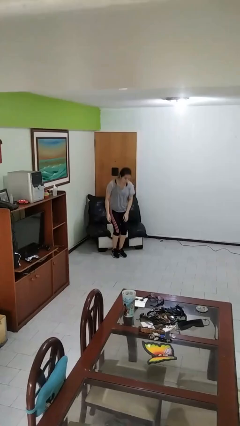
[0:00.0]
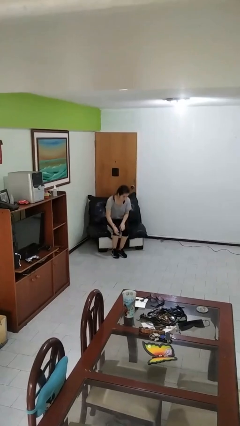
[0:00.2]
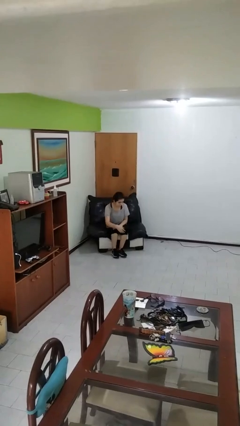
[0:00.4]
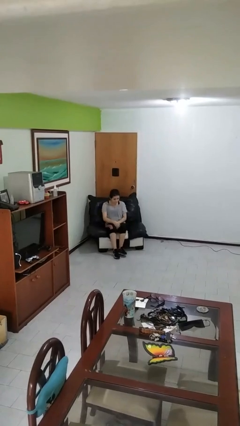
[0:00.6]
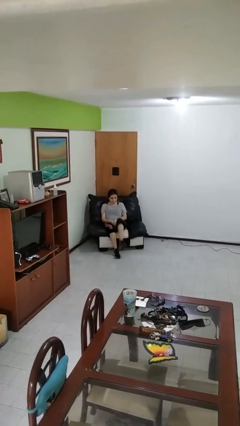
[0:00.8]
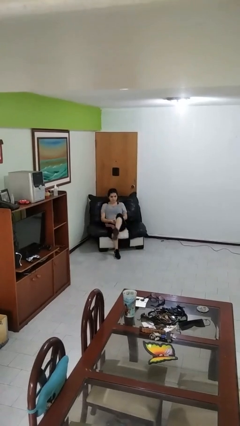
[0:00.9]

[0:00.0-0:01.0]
person lies down on couch

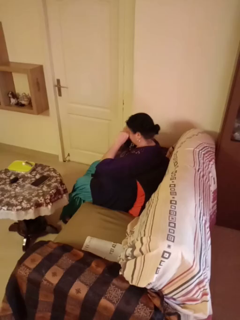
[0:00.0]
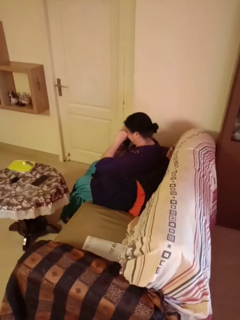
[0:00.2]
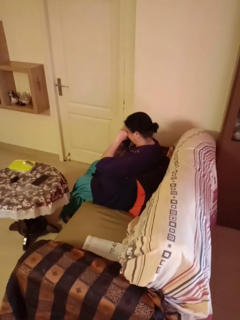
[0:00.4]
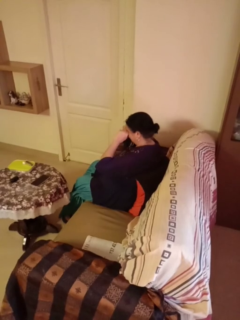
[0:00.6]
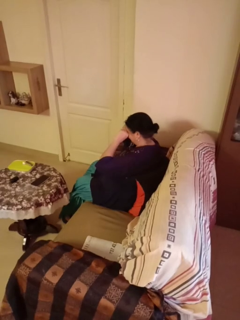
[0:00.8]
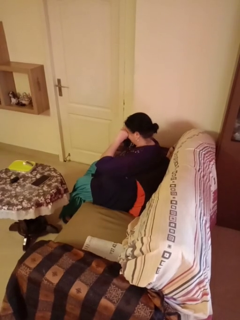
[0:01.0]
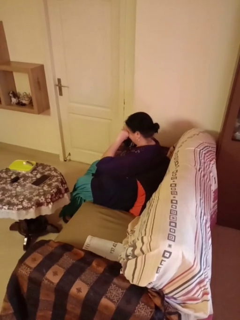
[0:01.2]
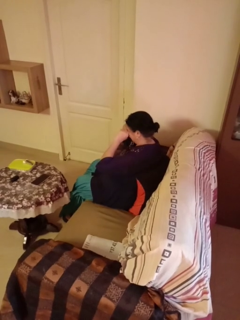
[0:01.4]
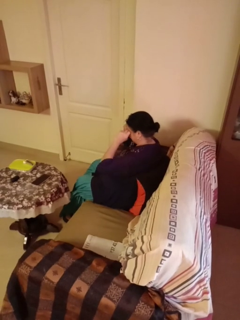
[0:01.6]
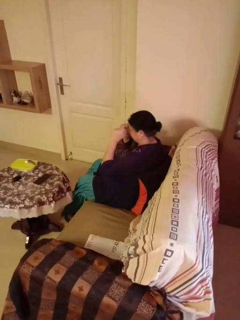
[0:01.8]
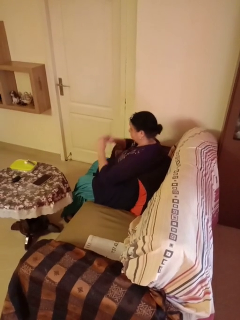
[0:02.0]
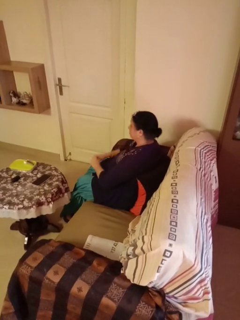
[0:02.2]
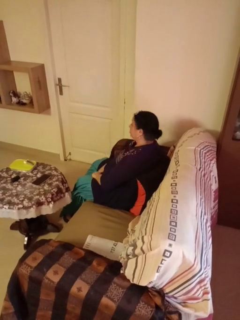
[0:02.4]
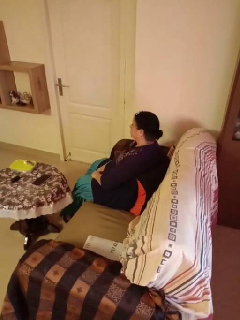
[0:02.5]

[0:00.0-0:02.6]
person rubs eyes

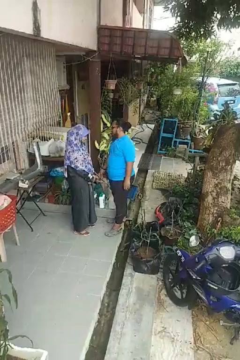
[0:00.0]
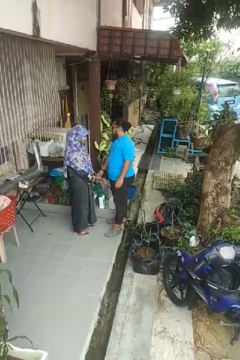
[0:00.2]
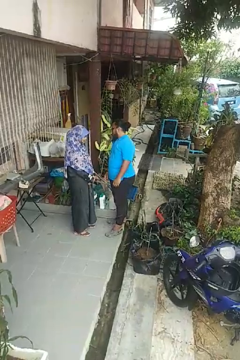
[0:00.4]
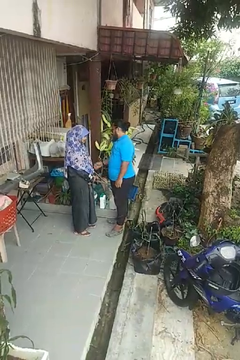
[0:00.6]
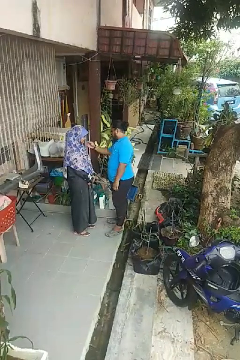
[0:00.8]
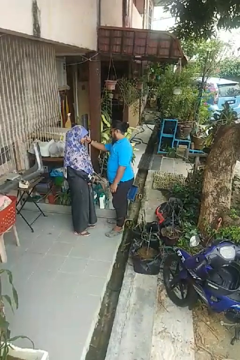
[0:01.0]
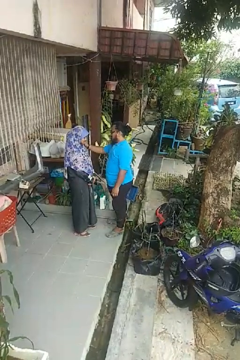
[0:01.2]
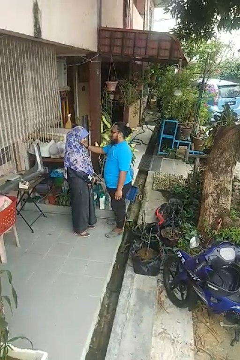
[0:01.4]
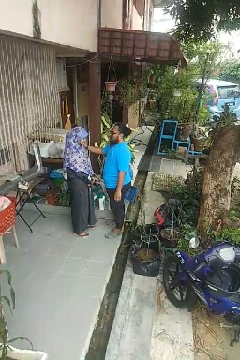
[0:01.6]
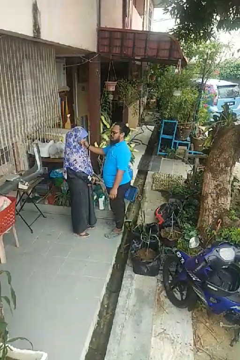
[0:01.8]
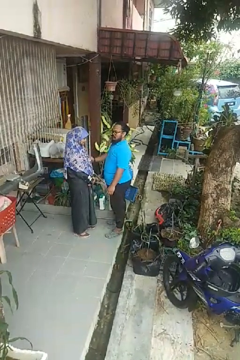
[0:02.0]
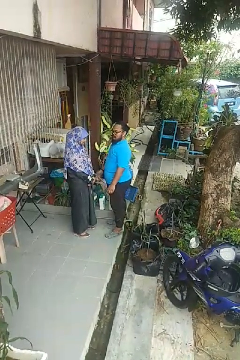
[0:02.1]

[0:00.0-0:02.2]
person pounds shoulders of person

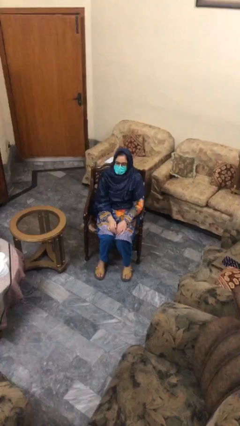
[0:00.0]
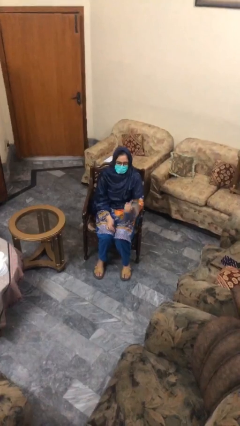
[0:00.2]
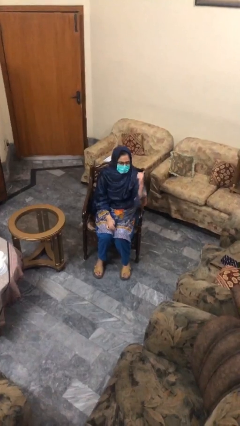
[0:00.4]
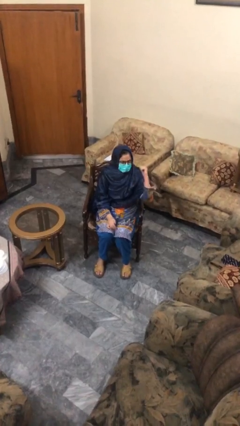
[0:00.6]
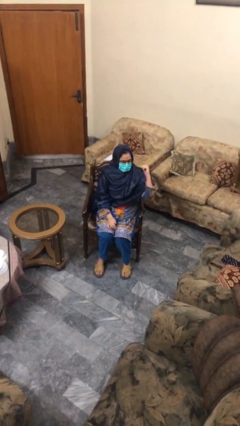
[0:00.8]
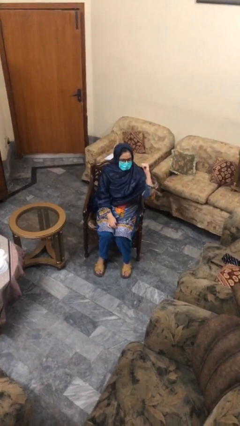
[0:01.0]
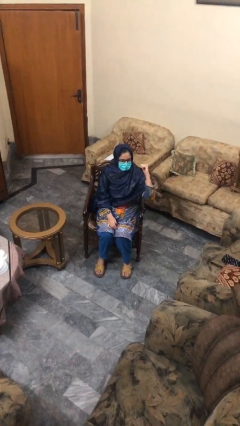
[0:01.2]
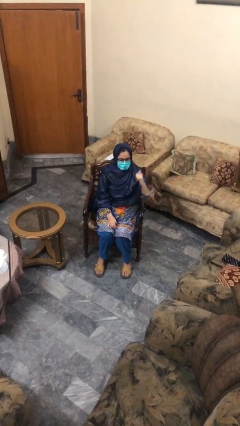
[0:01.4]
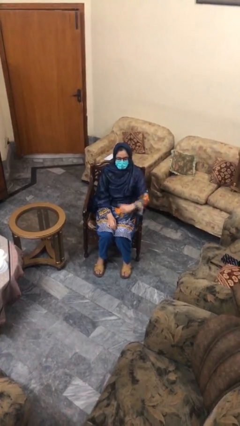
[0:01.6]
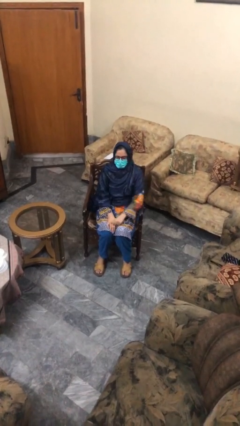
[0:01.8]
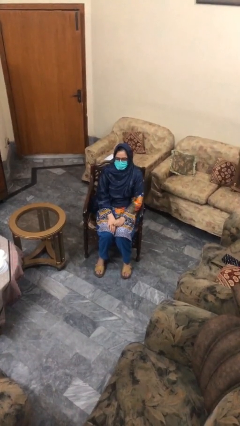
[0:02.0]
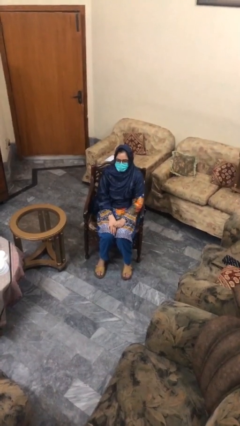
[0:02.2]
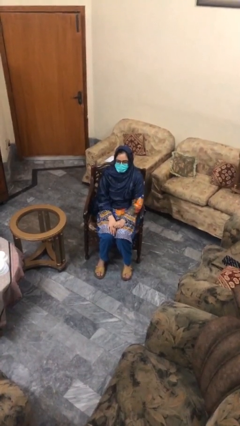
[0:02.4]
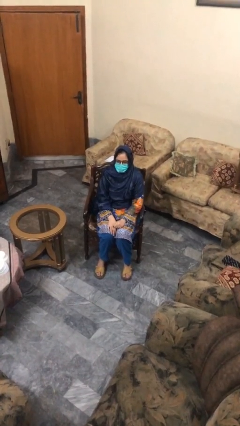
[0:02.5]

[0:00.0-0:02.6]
person gestures behind me

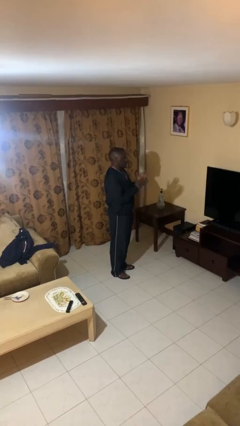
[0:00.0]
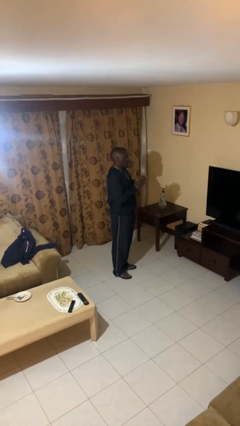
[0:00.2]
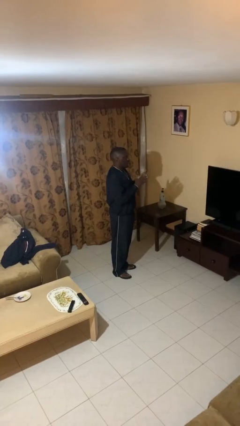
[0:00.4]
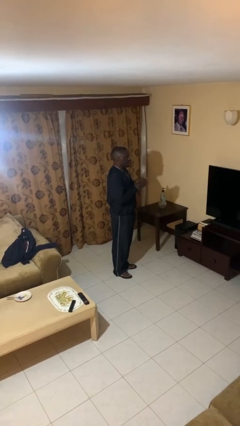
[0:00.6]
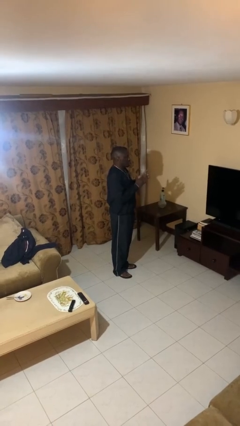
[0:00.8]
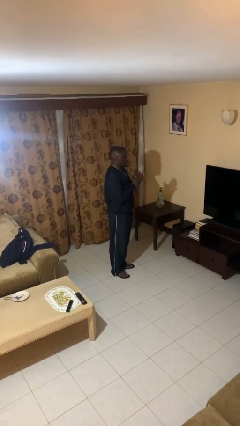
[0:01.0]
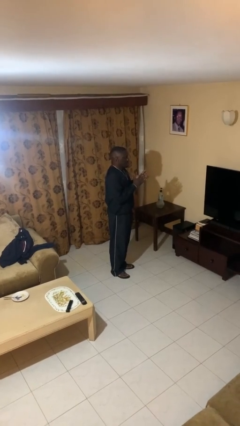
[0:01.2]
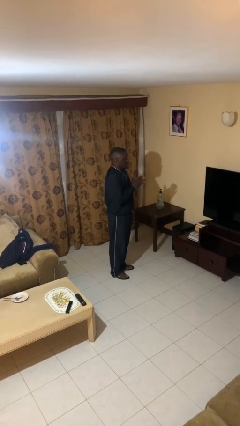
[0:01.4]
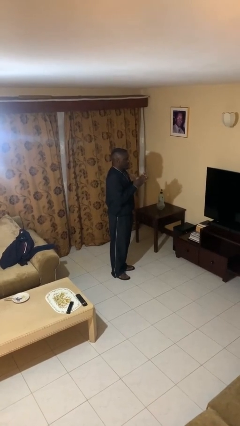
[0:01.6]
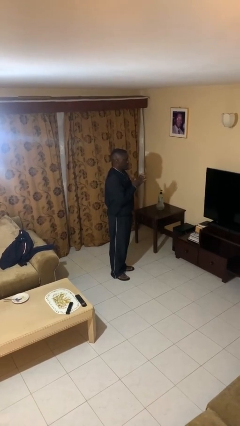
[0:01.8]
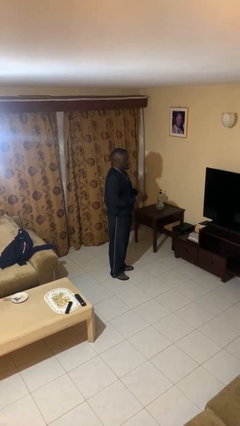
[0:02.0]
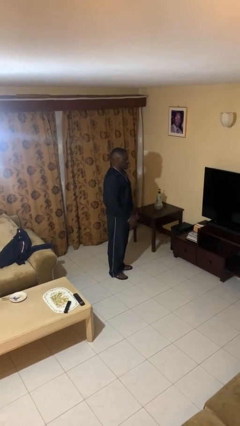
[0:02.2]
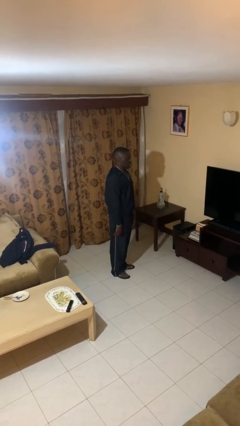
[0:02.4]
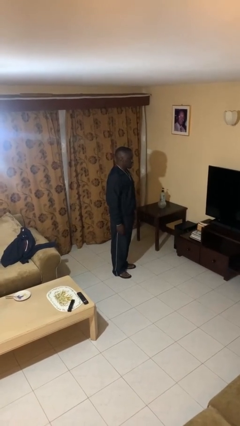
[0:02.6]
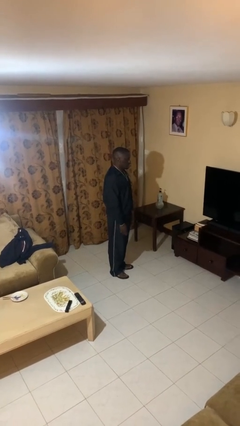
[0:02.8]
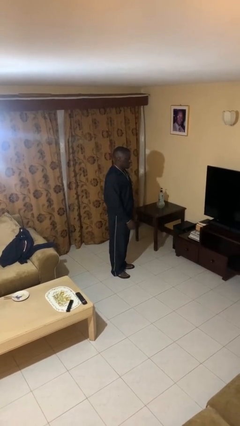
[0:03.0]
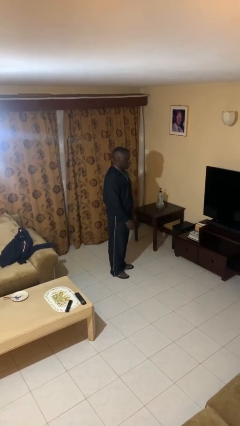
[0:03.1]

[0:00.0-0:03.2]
person claps hands

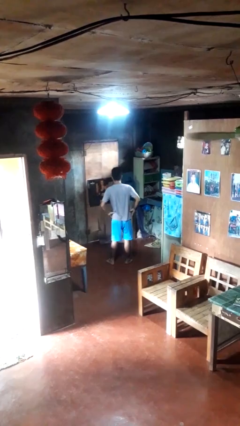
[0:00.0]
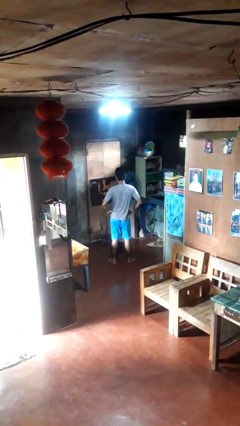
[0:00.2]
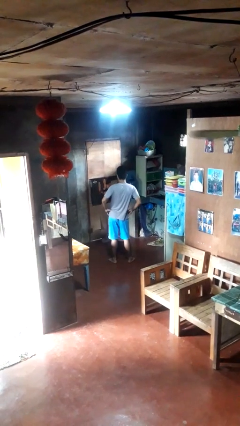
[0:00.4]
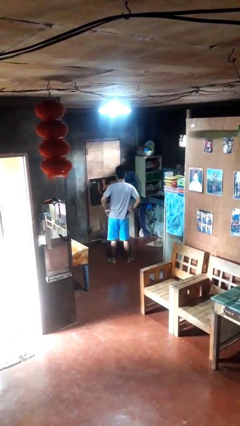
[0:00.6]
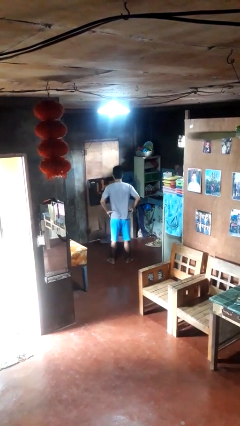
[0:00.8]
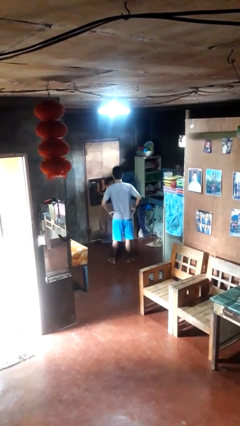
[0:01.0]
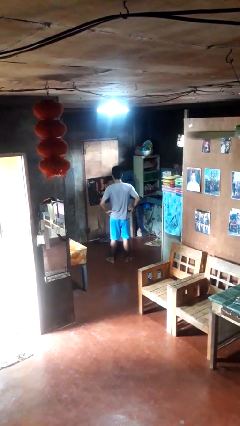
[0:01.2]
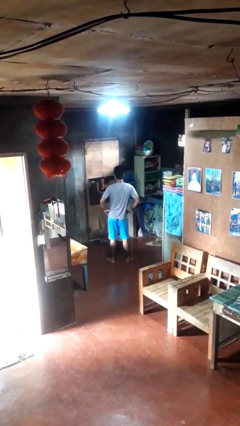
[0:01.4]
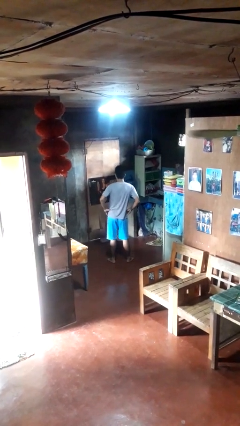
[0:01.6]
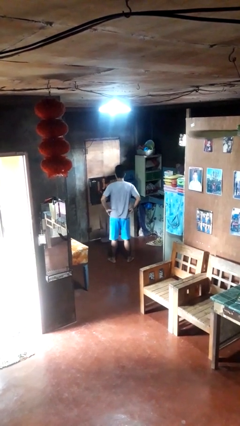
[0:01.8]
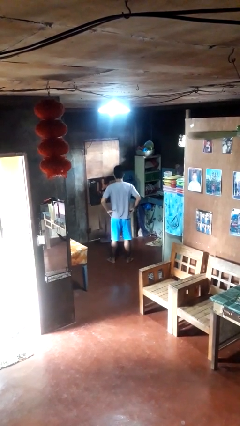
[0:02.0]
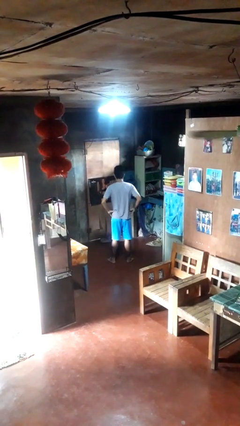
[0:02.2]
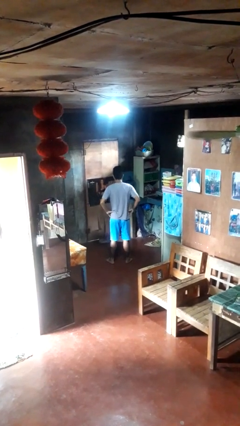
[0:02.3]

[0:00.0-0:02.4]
person wiggles hips

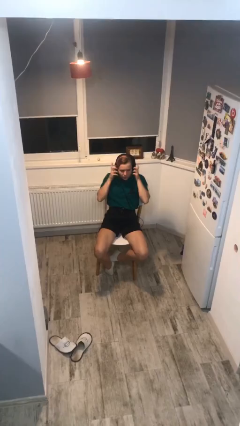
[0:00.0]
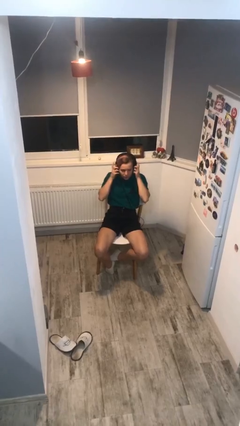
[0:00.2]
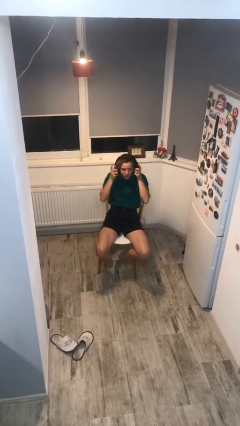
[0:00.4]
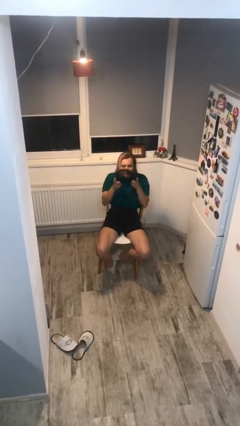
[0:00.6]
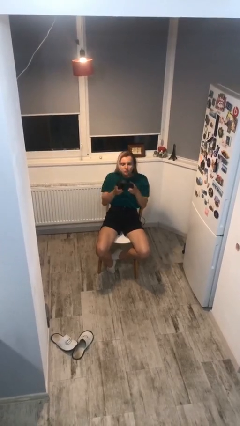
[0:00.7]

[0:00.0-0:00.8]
person takes off headphones

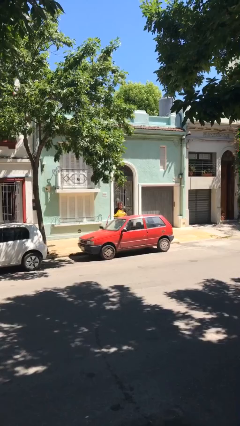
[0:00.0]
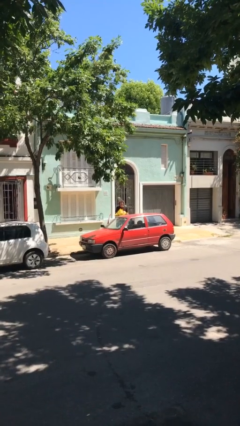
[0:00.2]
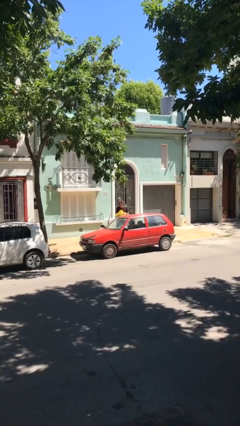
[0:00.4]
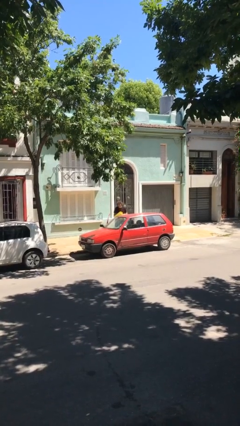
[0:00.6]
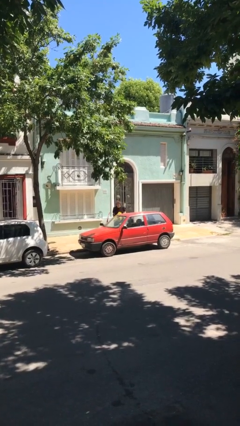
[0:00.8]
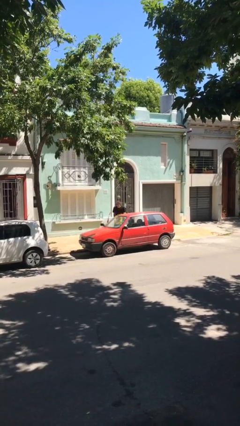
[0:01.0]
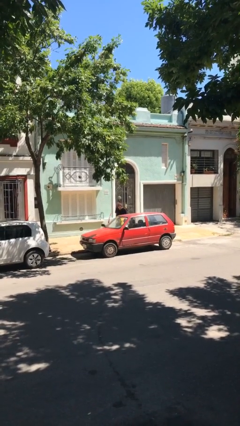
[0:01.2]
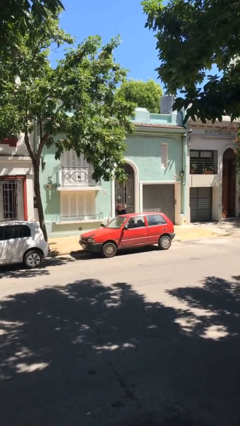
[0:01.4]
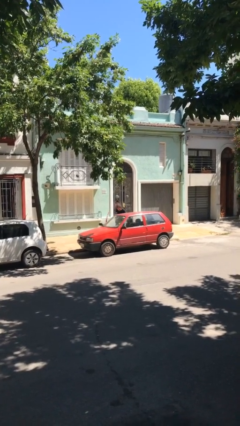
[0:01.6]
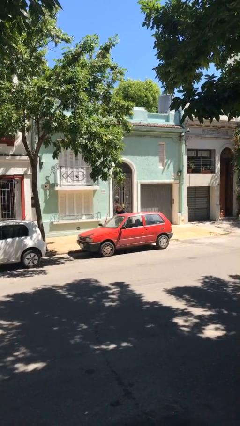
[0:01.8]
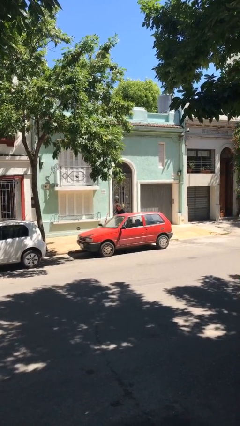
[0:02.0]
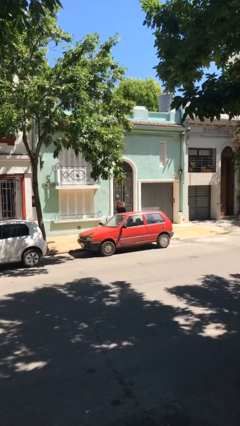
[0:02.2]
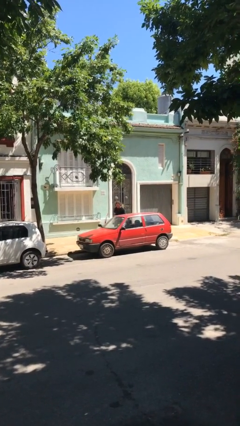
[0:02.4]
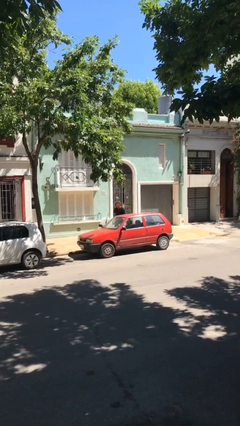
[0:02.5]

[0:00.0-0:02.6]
person loads car

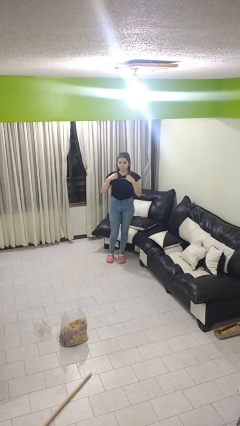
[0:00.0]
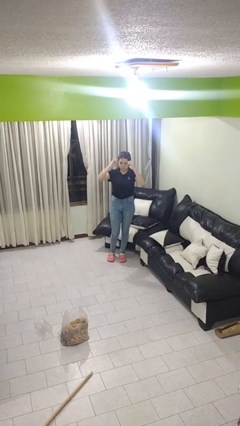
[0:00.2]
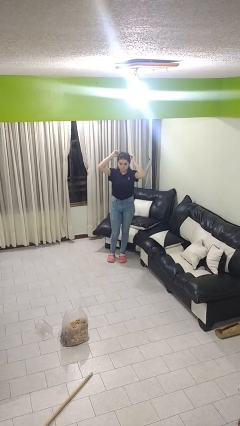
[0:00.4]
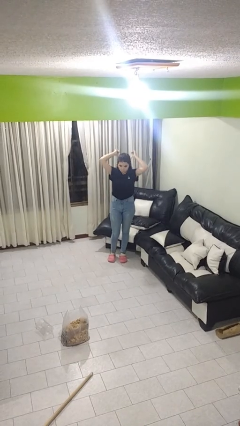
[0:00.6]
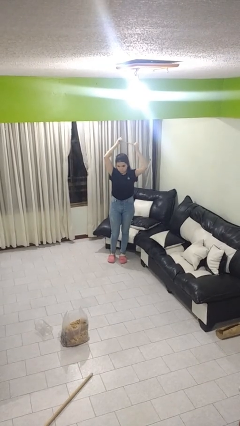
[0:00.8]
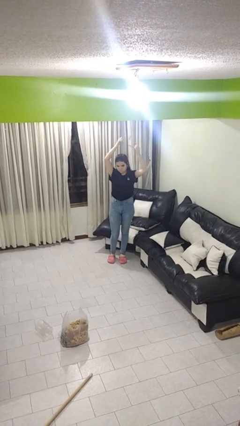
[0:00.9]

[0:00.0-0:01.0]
person takes off necklace
